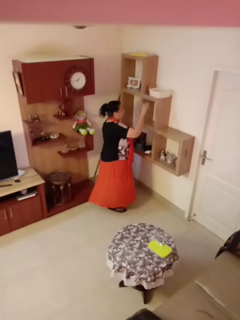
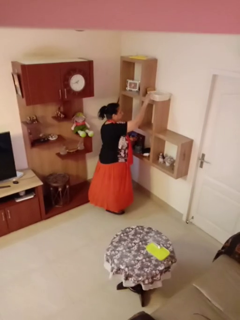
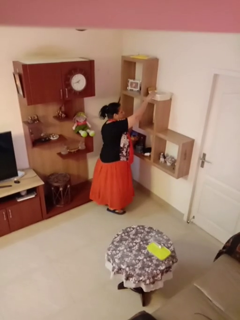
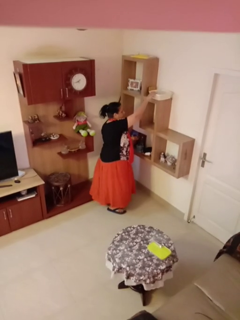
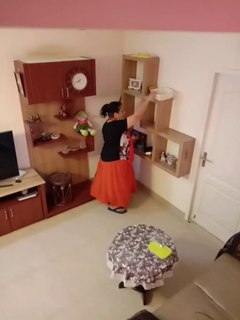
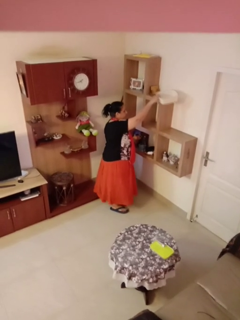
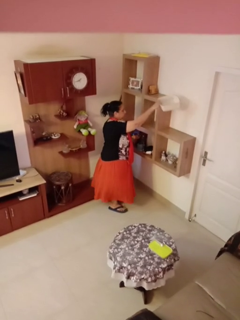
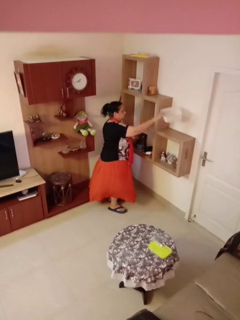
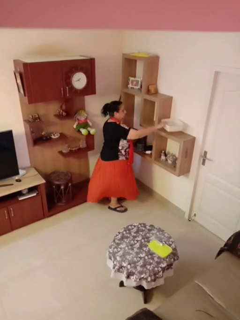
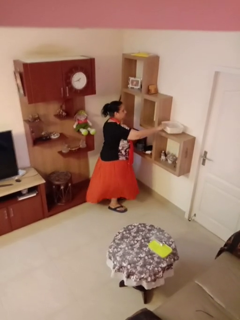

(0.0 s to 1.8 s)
person picks up object from shelf

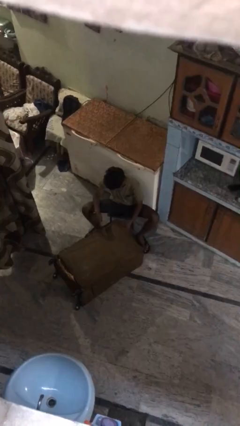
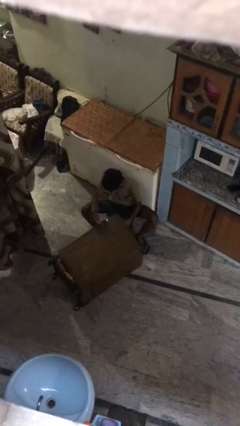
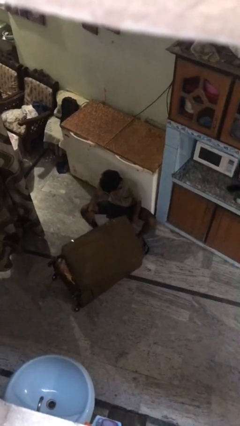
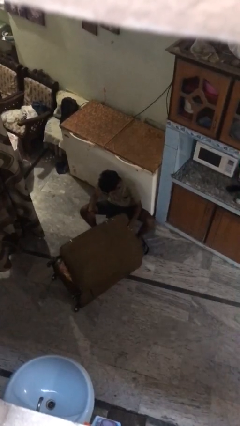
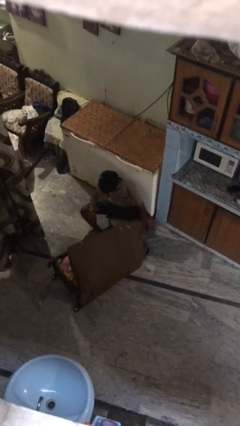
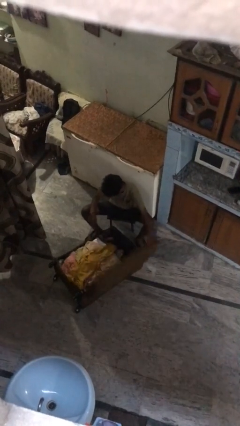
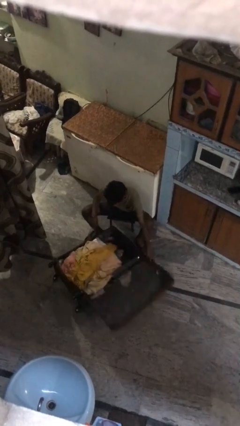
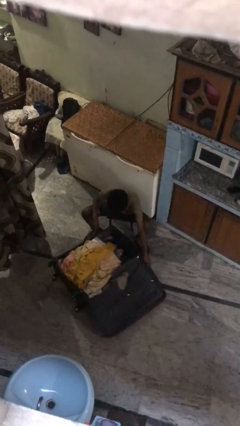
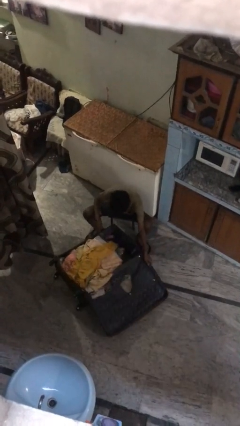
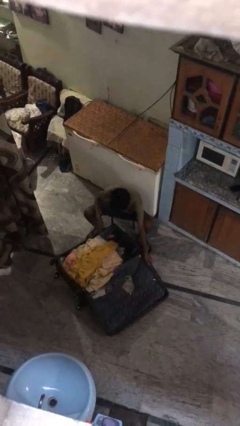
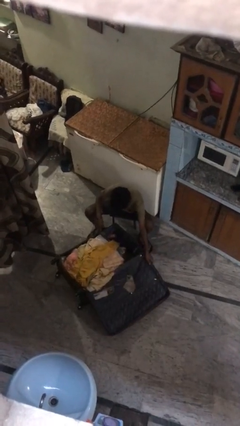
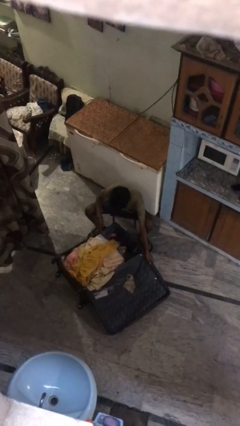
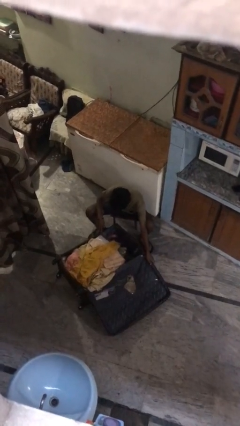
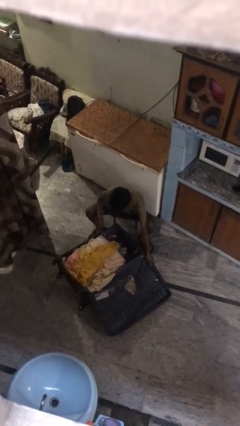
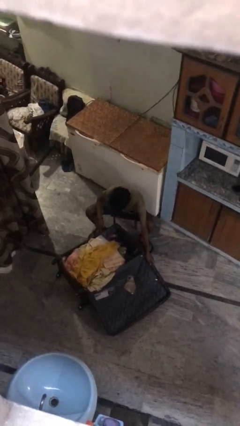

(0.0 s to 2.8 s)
person opens suitcase

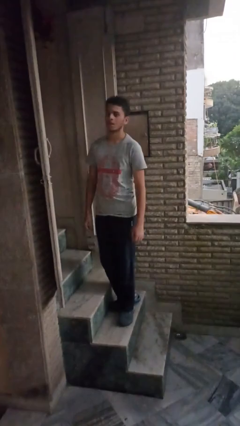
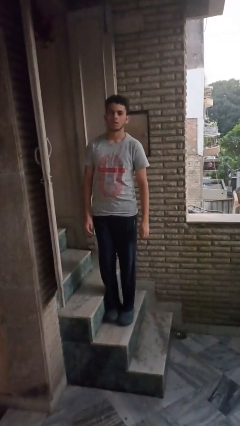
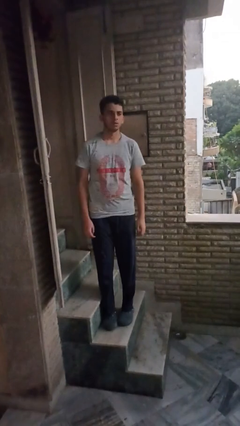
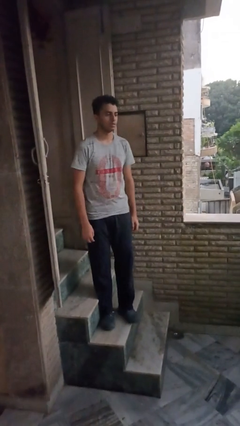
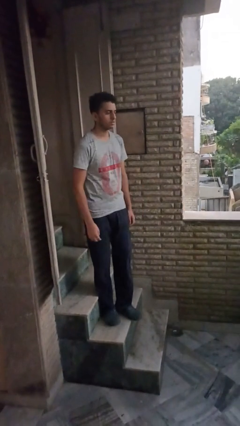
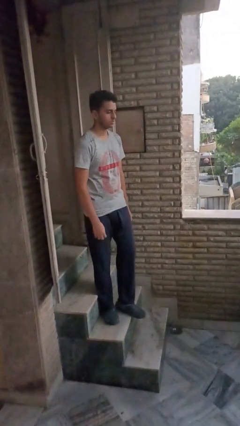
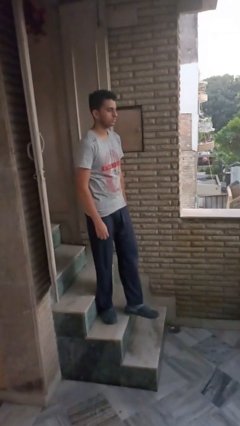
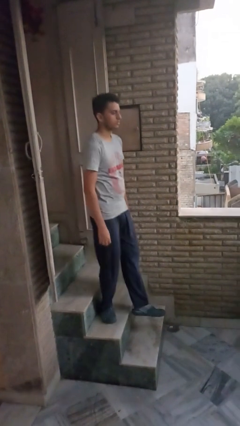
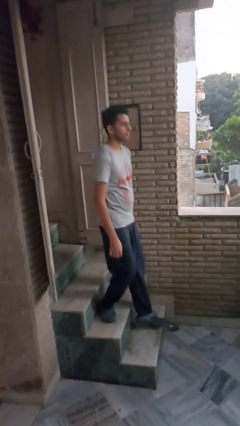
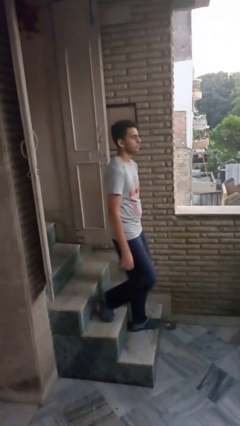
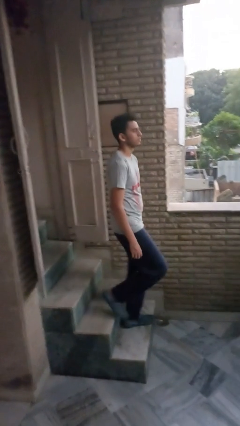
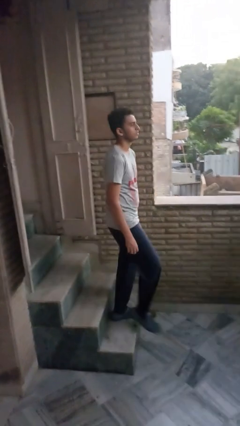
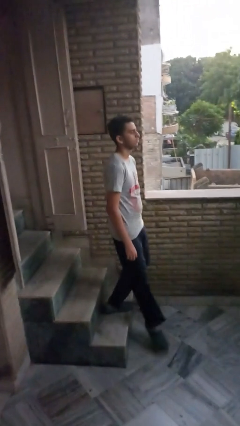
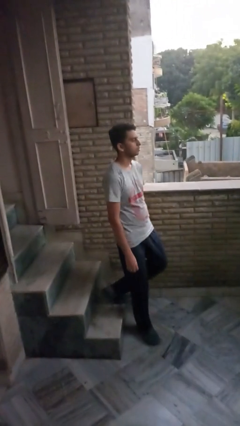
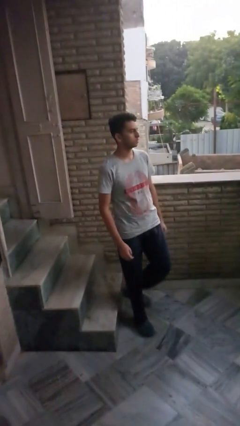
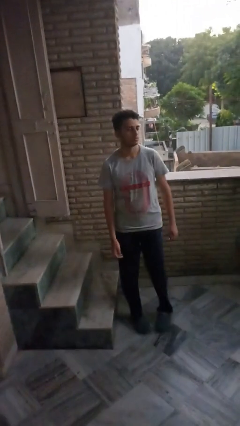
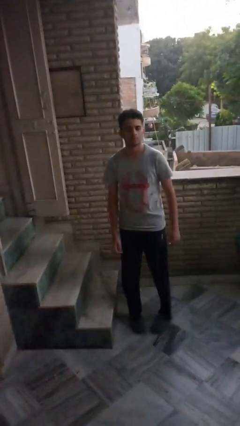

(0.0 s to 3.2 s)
person climbs down stairs

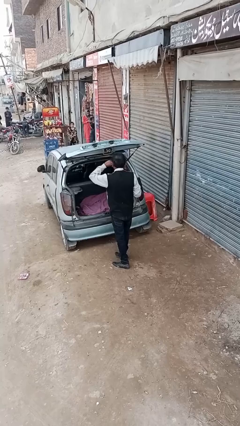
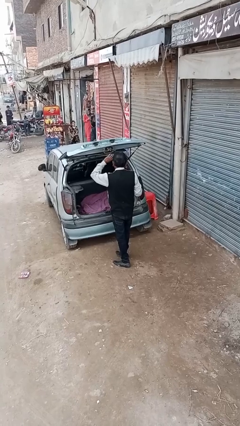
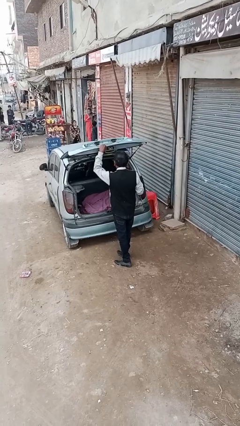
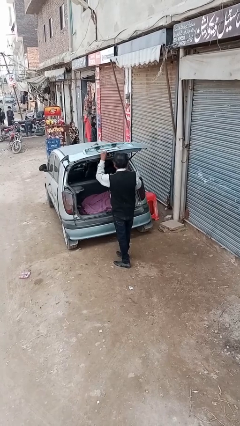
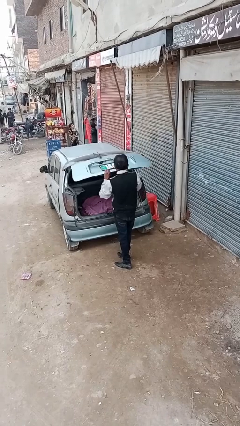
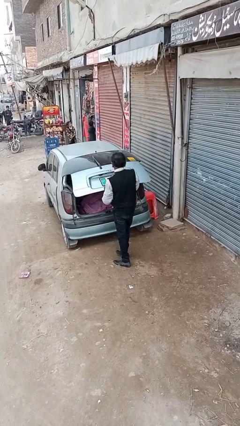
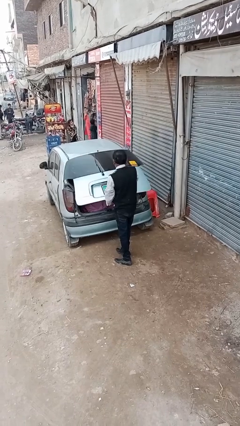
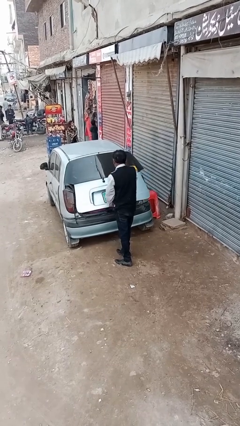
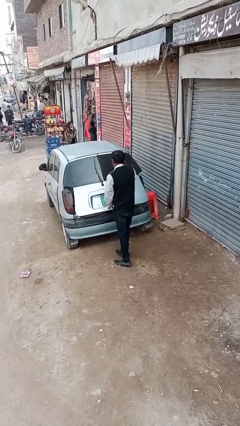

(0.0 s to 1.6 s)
person closes car trunk

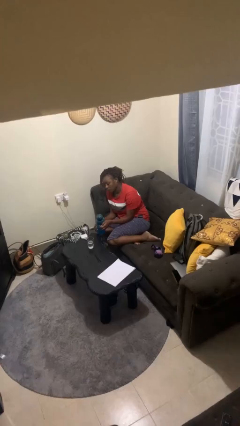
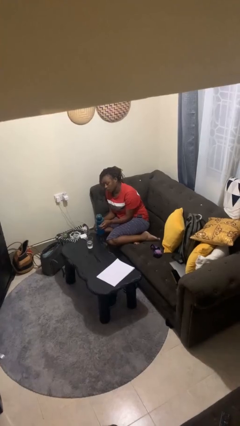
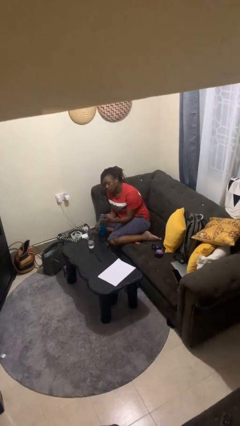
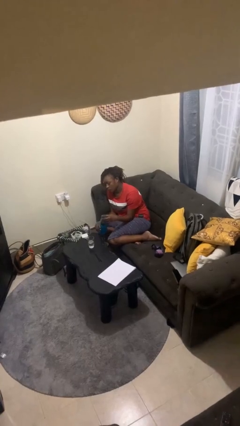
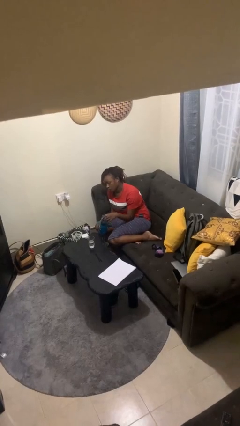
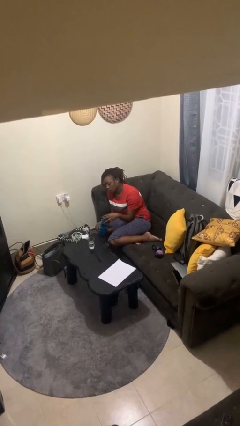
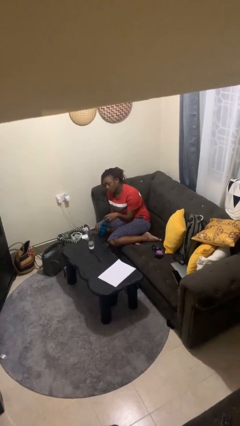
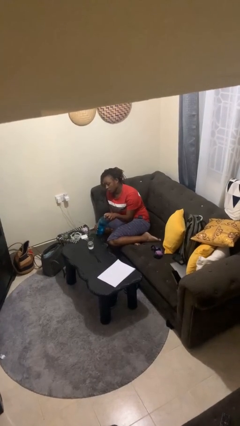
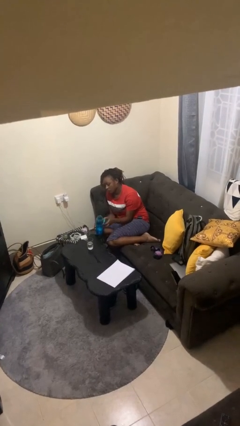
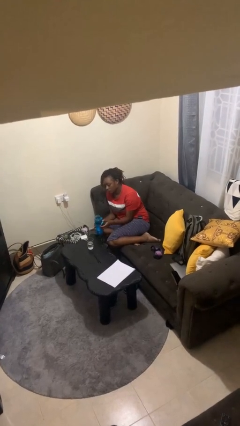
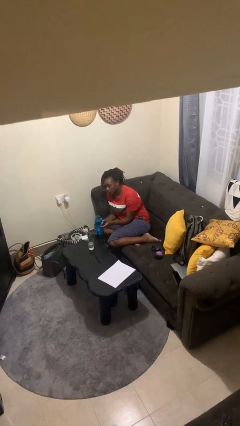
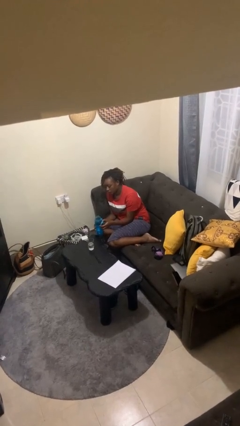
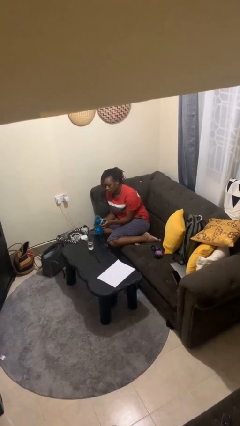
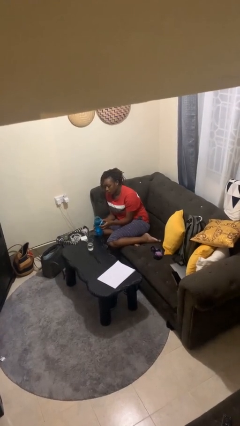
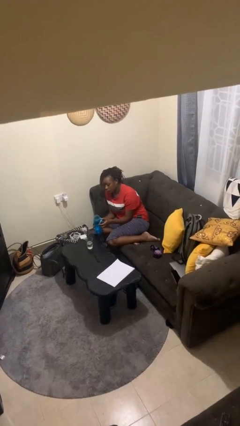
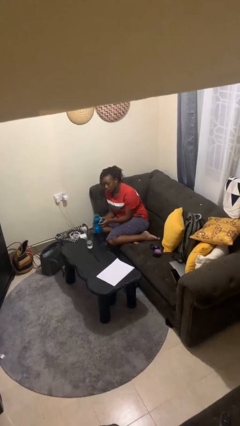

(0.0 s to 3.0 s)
person unscrews lid from bottle

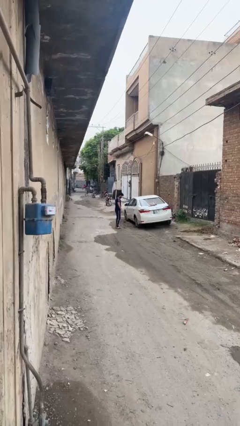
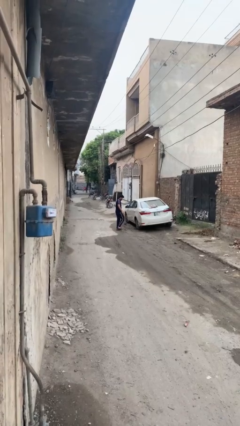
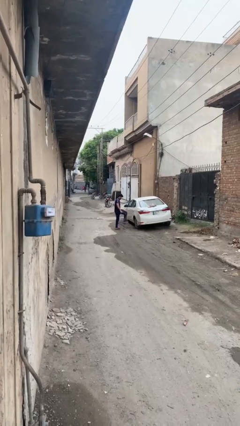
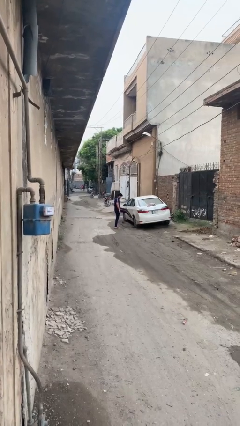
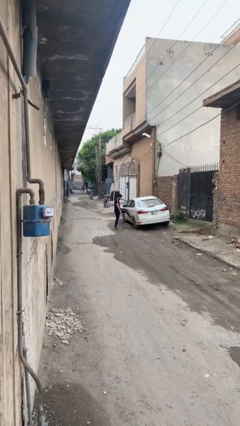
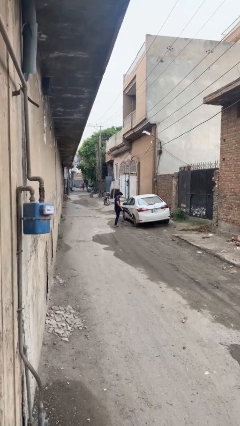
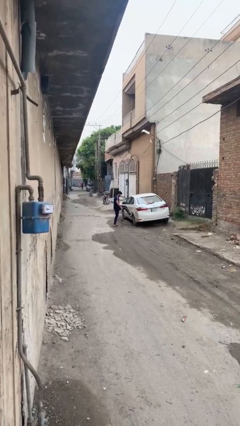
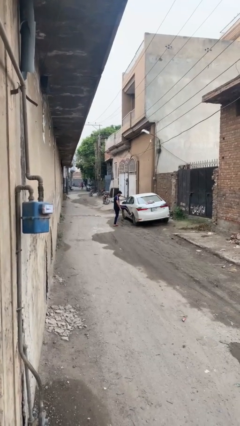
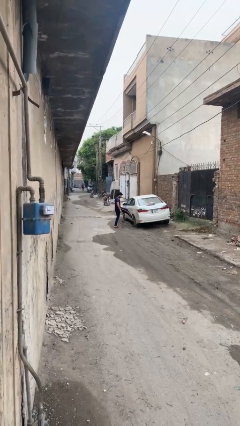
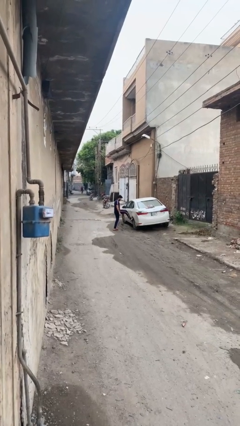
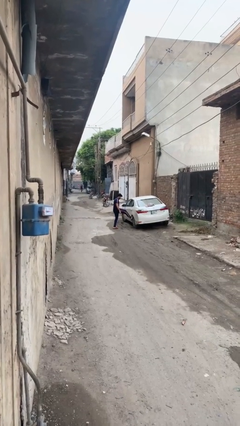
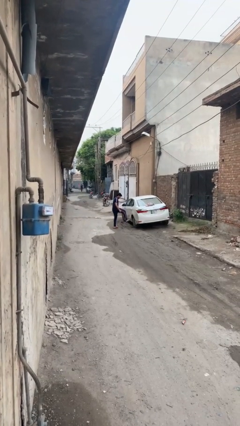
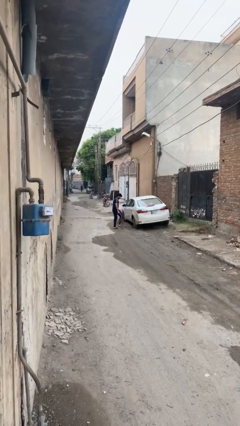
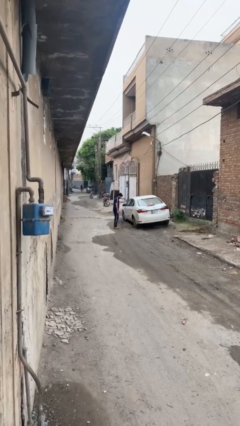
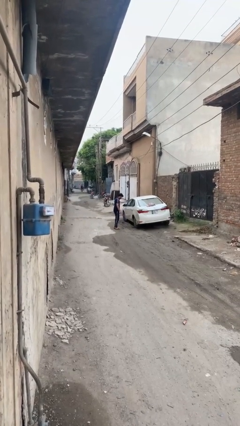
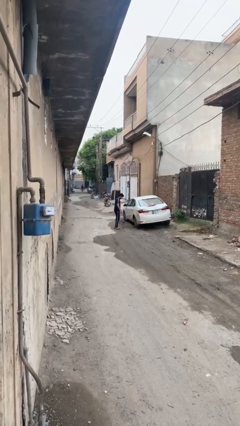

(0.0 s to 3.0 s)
person kicks car tires

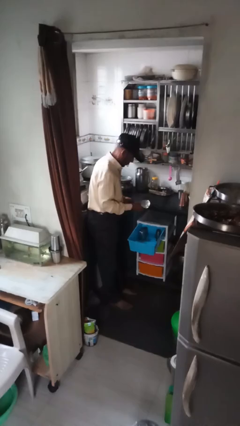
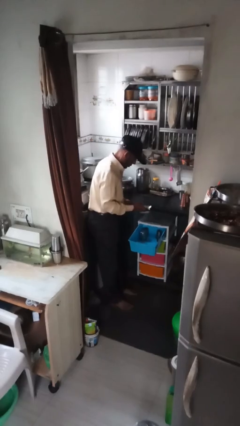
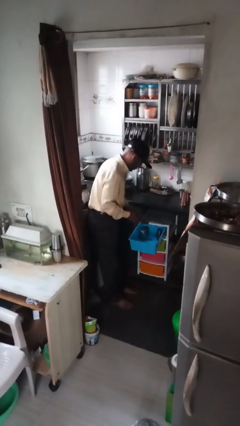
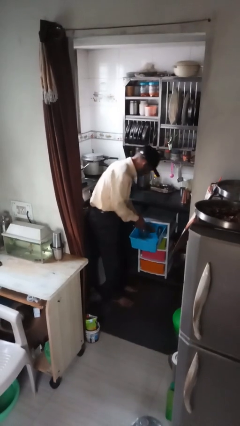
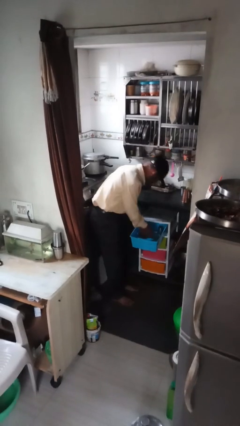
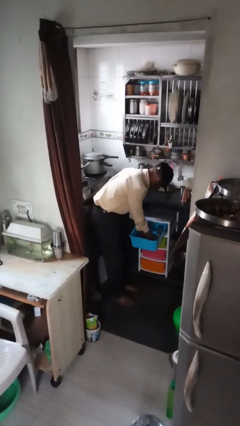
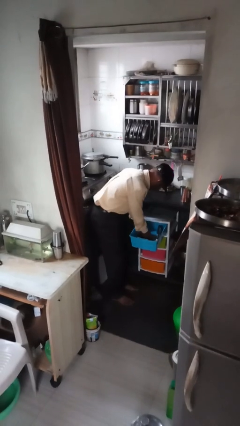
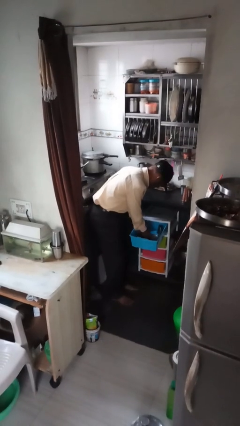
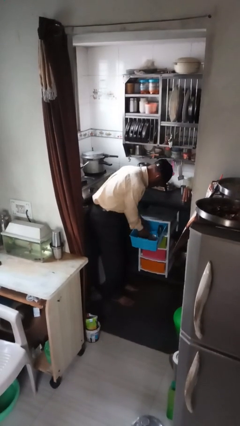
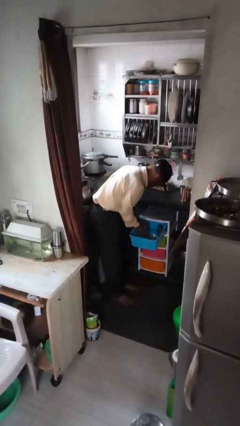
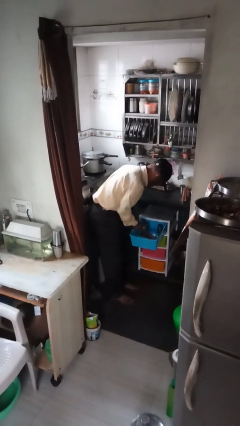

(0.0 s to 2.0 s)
person puts object into kitchen drawer
